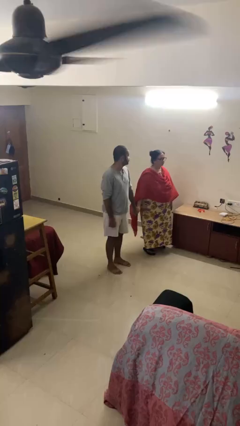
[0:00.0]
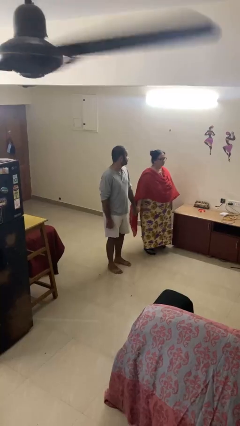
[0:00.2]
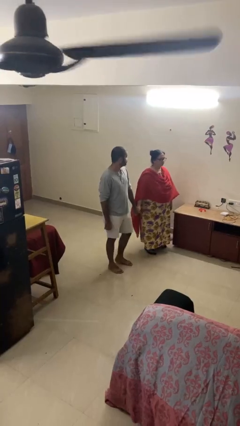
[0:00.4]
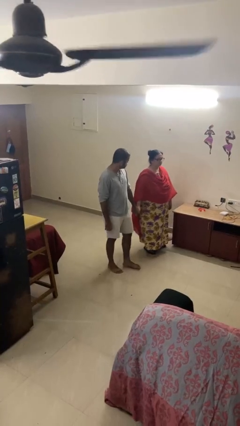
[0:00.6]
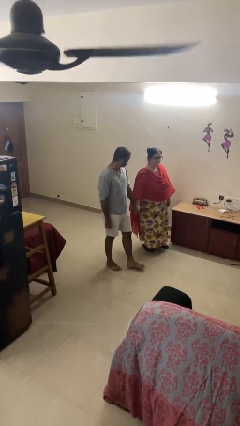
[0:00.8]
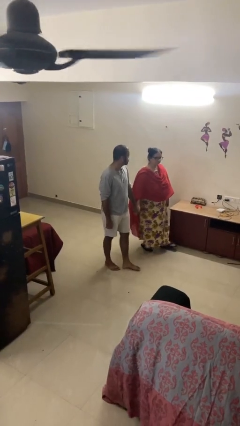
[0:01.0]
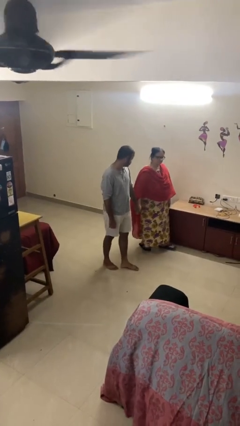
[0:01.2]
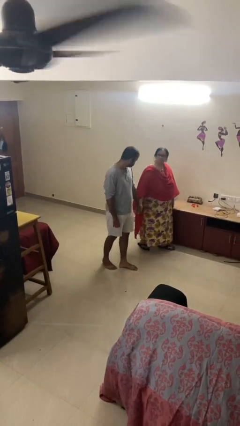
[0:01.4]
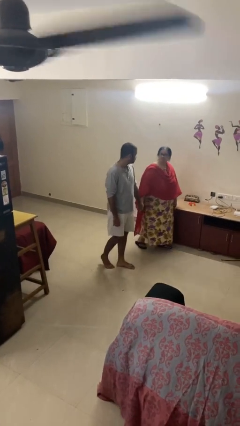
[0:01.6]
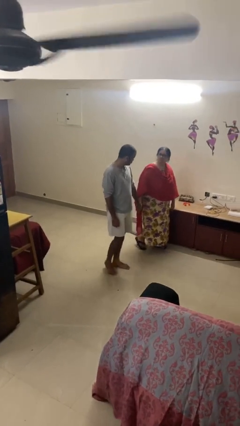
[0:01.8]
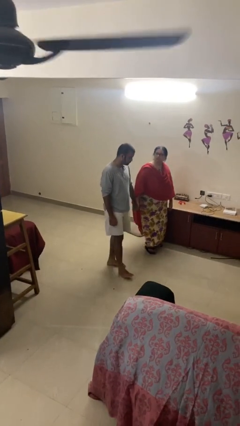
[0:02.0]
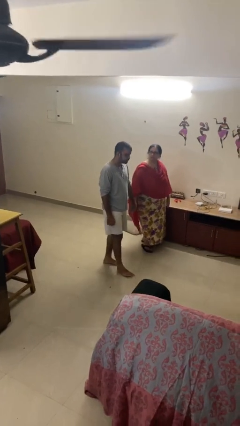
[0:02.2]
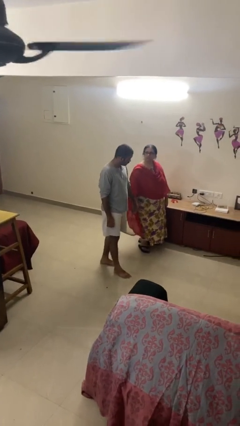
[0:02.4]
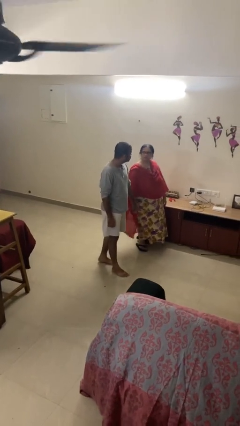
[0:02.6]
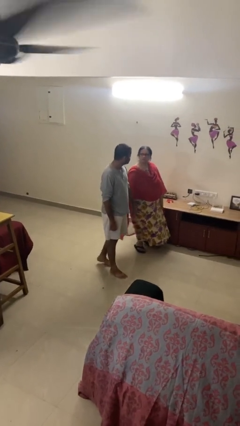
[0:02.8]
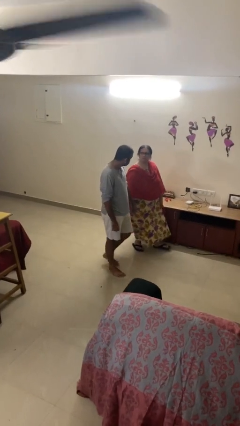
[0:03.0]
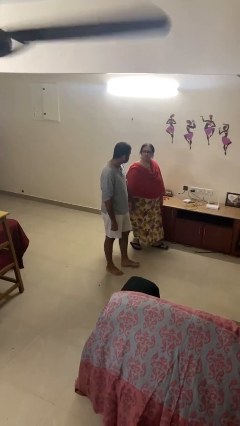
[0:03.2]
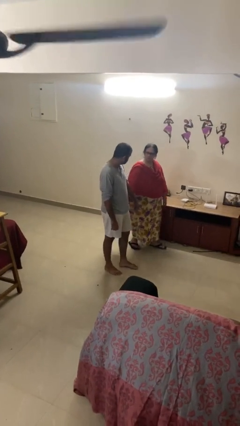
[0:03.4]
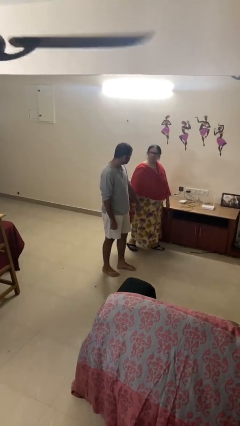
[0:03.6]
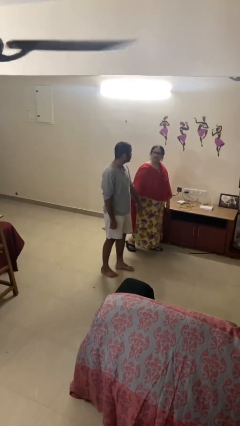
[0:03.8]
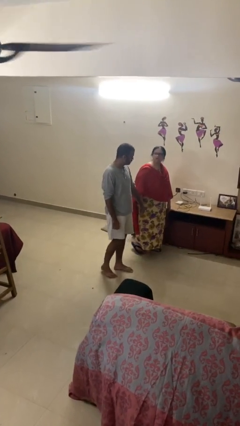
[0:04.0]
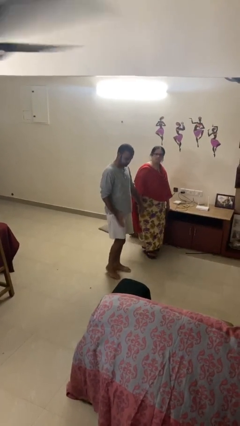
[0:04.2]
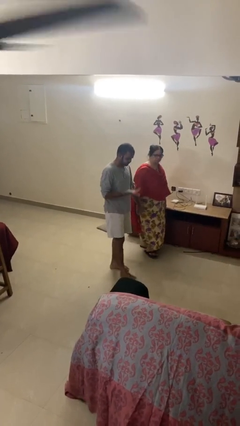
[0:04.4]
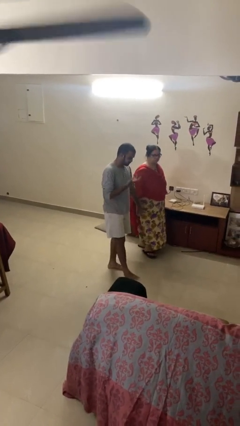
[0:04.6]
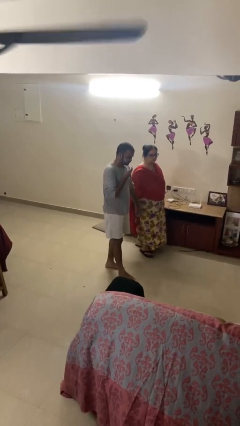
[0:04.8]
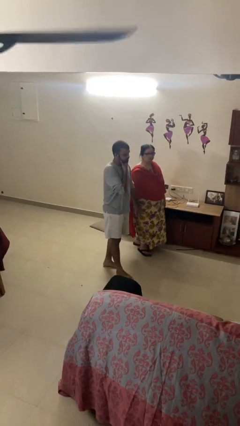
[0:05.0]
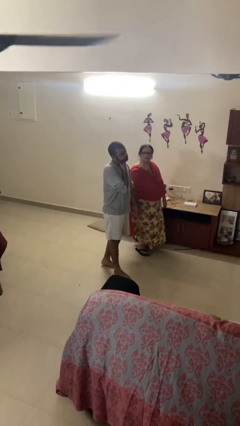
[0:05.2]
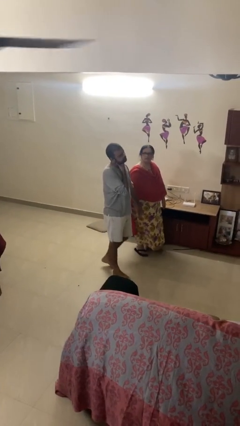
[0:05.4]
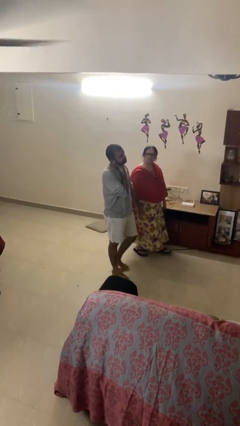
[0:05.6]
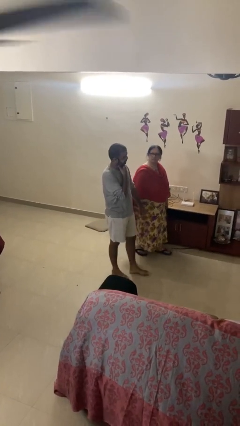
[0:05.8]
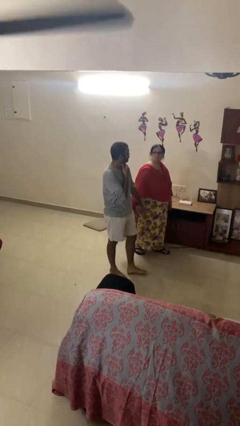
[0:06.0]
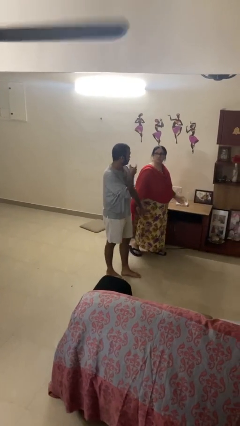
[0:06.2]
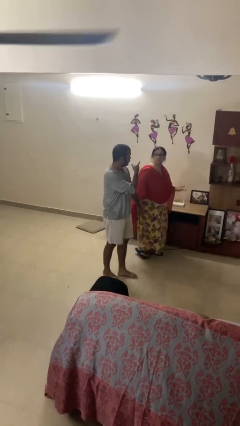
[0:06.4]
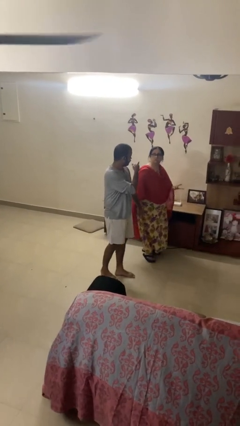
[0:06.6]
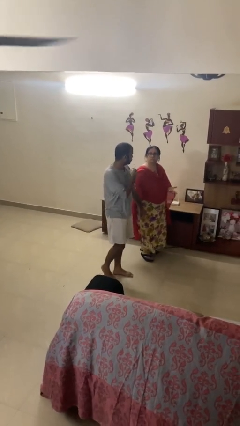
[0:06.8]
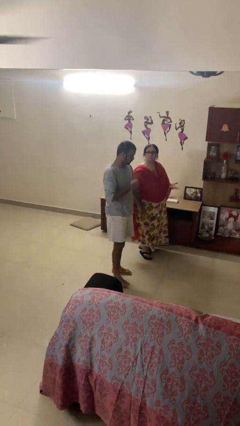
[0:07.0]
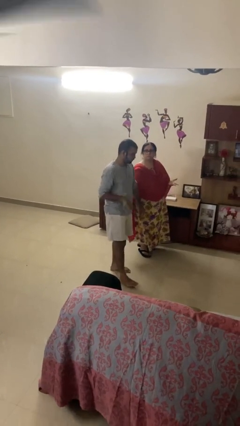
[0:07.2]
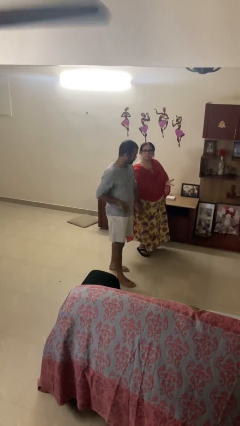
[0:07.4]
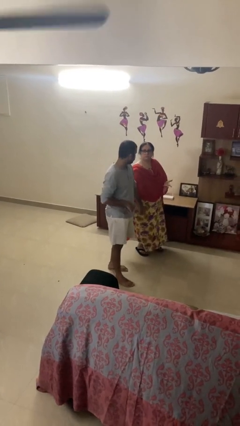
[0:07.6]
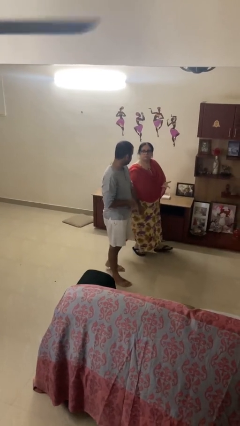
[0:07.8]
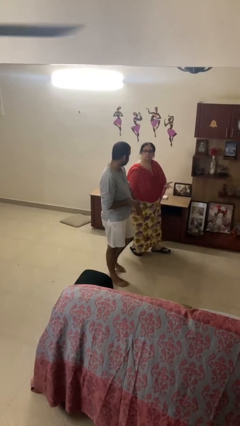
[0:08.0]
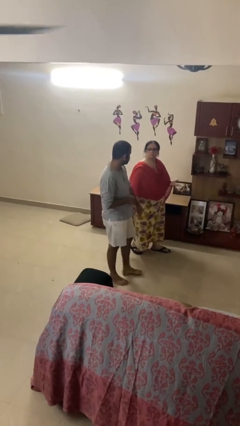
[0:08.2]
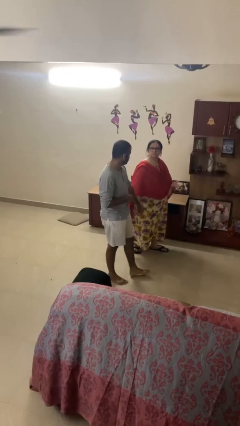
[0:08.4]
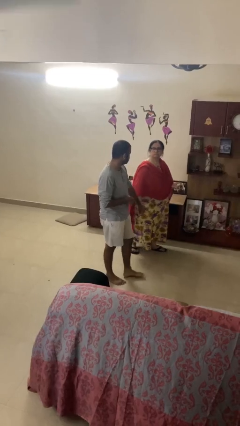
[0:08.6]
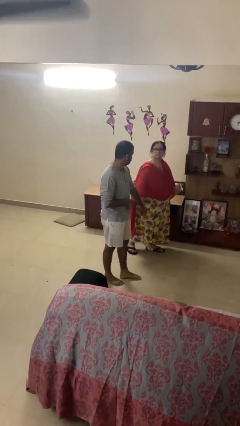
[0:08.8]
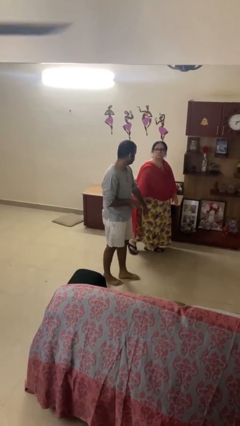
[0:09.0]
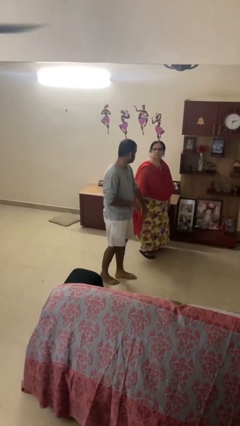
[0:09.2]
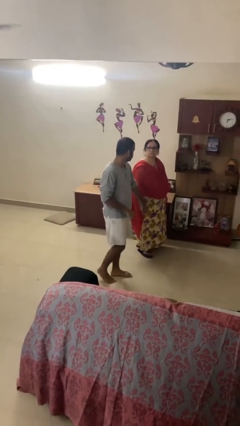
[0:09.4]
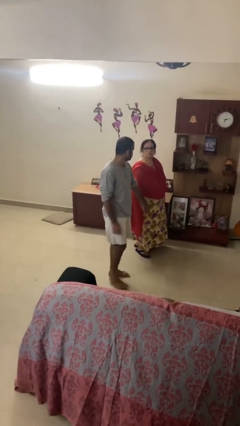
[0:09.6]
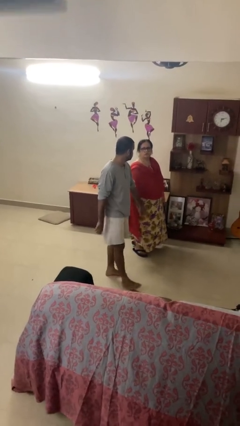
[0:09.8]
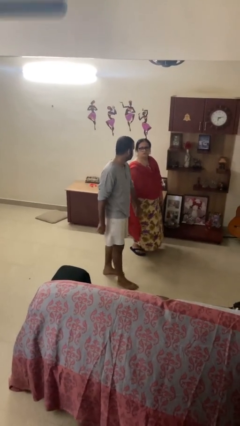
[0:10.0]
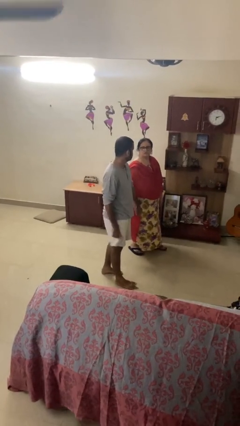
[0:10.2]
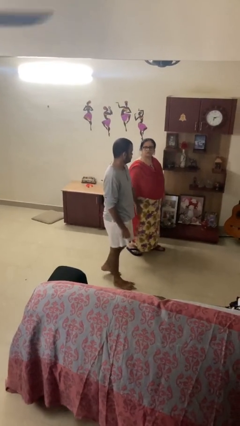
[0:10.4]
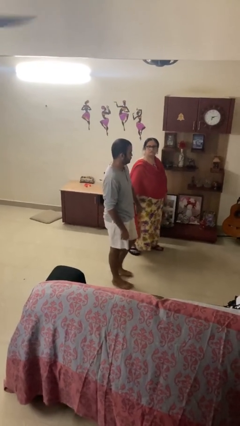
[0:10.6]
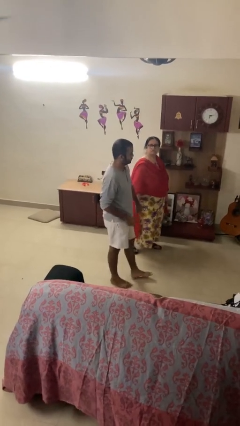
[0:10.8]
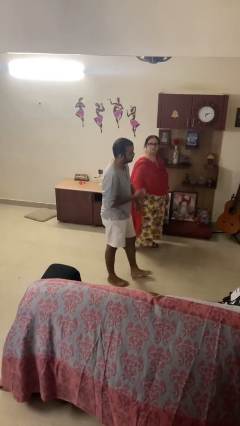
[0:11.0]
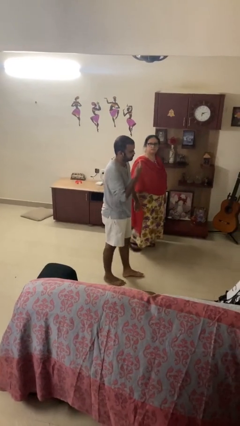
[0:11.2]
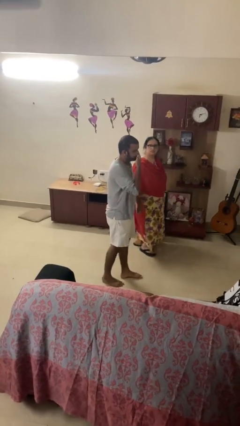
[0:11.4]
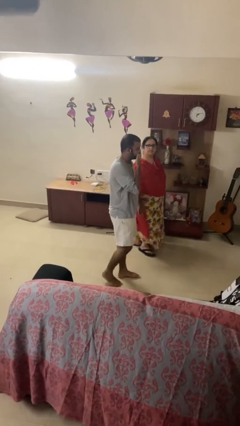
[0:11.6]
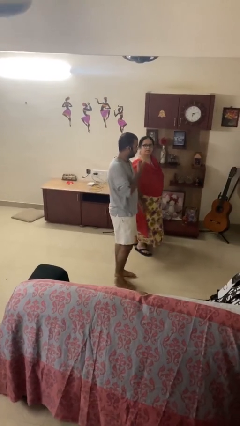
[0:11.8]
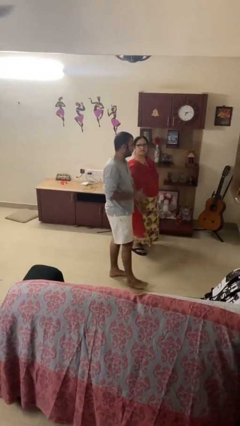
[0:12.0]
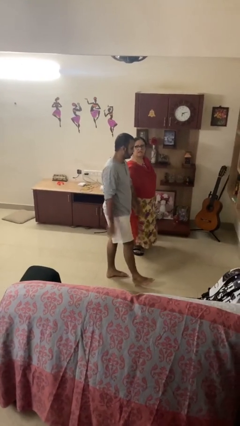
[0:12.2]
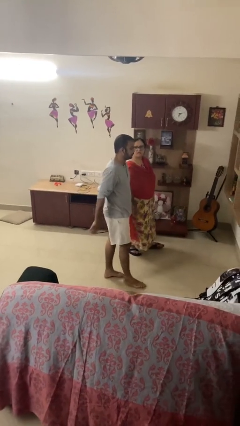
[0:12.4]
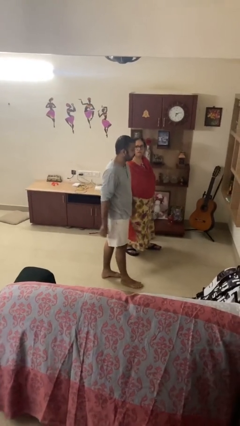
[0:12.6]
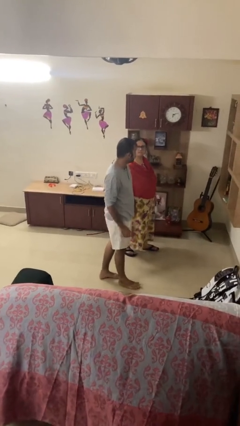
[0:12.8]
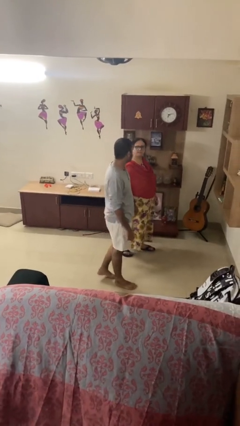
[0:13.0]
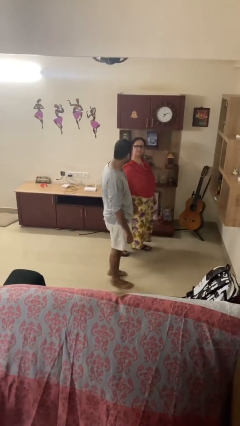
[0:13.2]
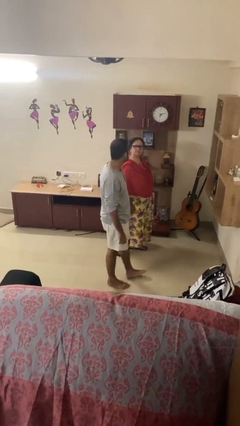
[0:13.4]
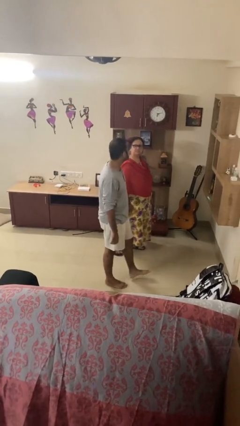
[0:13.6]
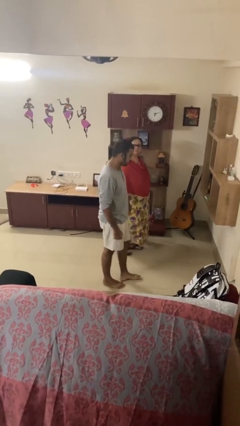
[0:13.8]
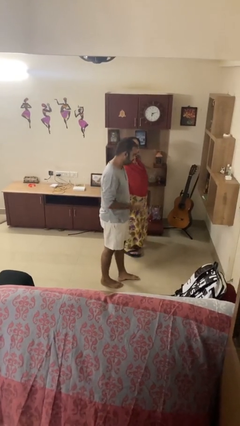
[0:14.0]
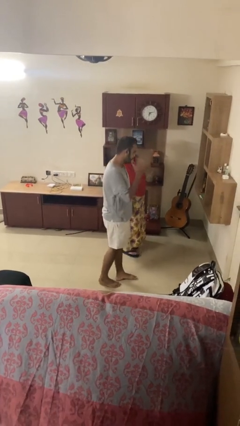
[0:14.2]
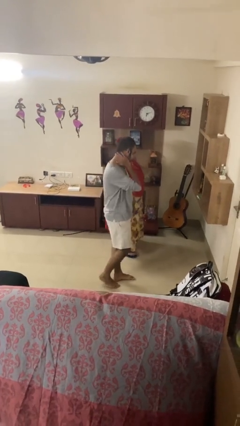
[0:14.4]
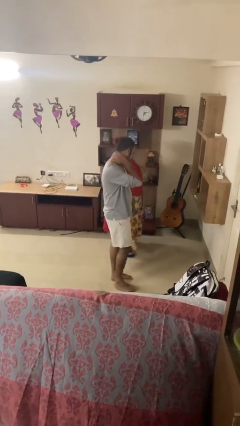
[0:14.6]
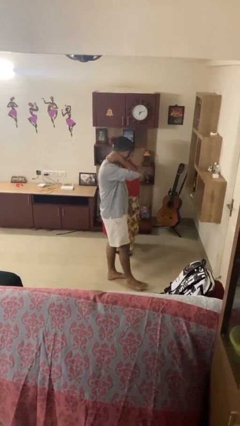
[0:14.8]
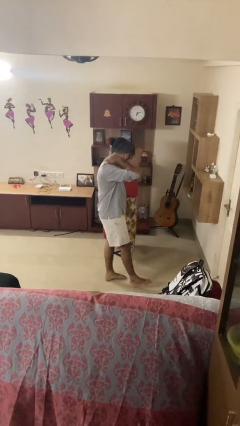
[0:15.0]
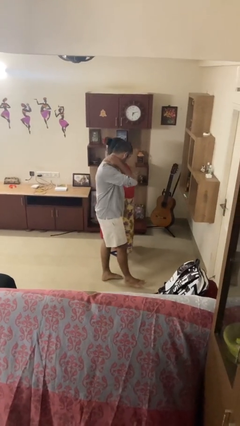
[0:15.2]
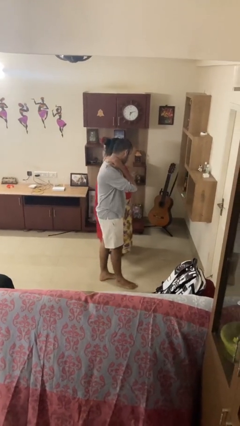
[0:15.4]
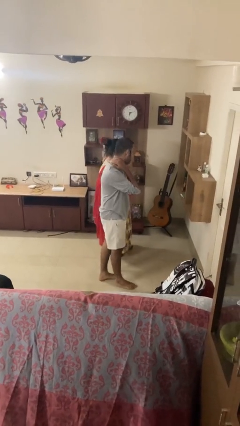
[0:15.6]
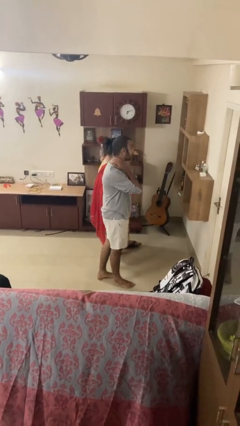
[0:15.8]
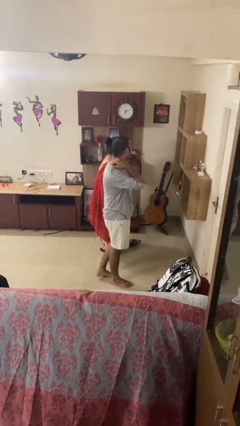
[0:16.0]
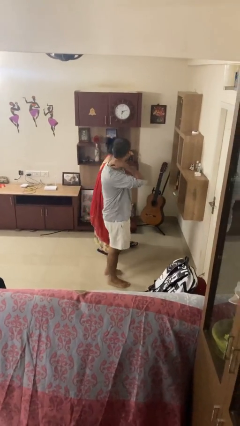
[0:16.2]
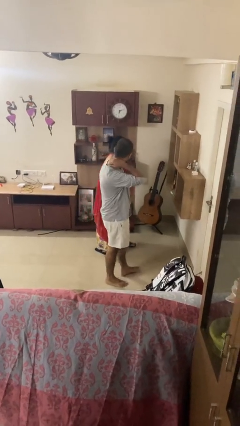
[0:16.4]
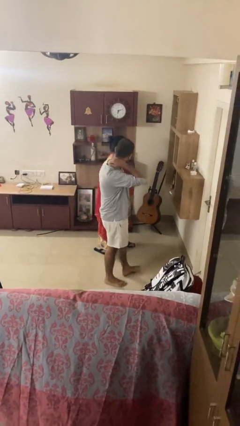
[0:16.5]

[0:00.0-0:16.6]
person holds hand

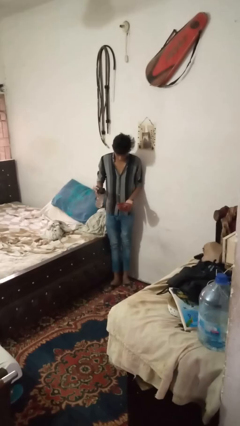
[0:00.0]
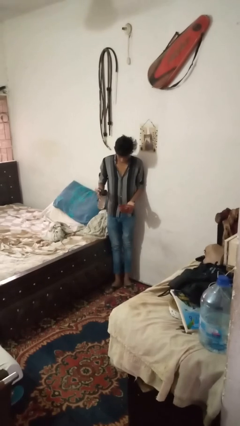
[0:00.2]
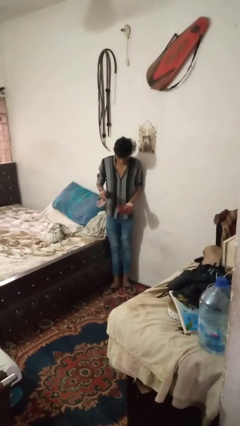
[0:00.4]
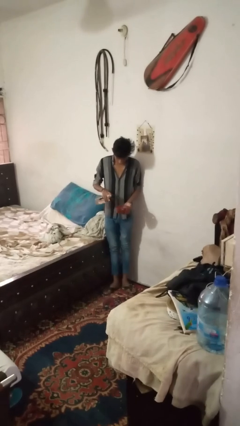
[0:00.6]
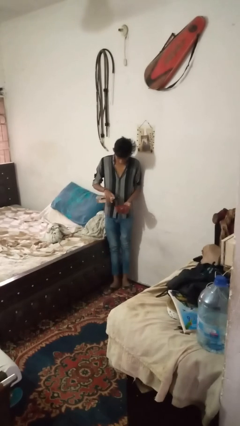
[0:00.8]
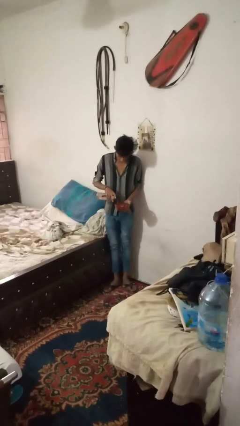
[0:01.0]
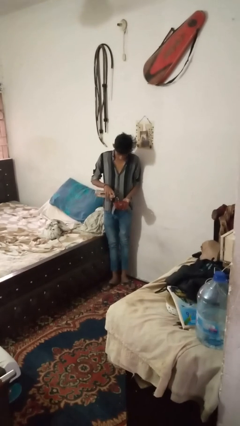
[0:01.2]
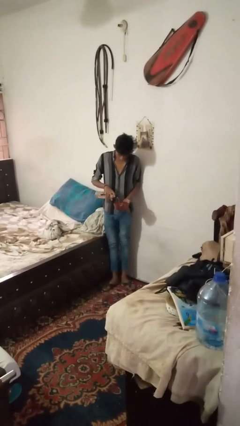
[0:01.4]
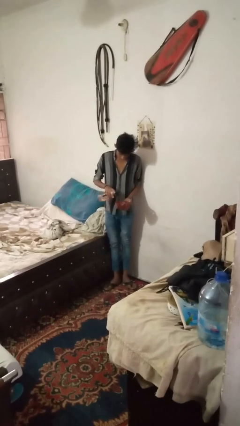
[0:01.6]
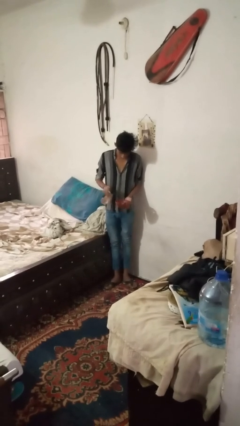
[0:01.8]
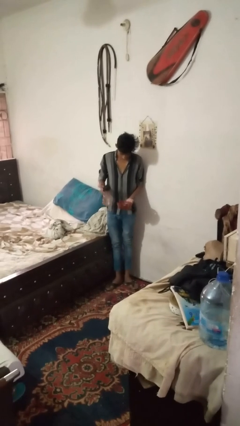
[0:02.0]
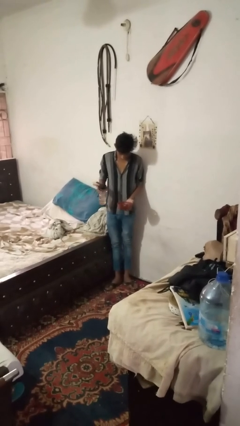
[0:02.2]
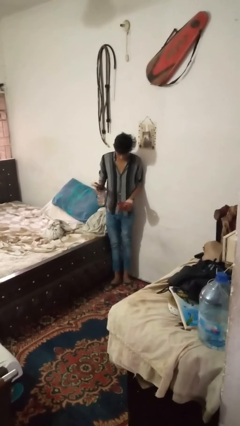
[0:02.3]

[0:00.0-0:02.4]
person pours liquid into cup
